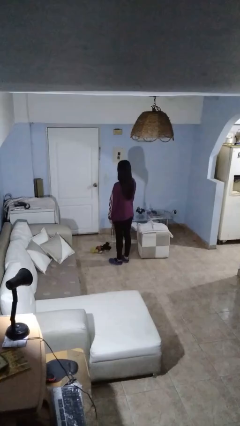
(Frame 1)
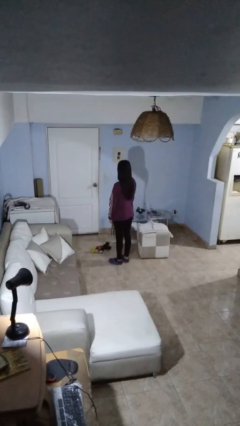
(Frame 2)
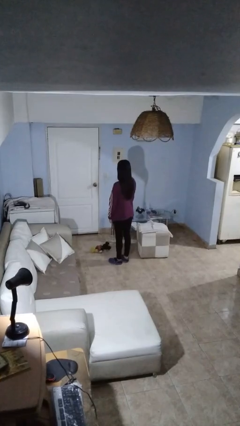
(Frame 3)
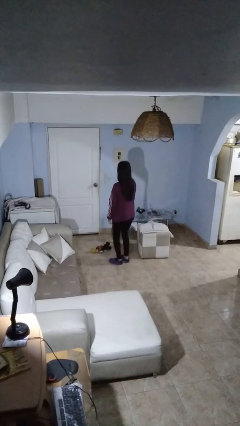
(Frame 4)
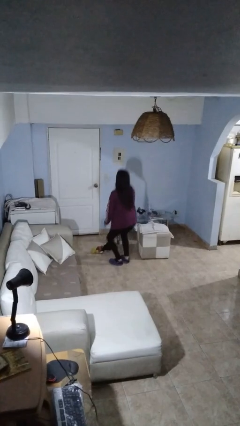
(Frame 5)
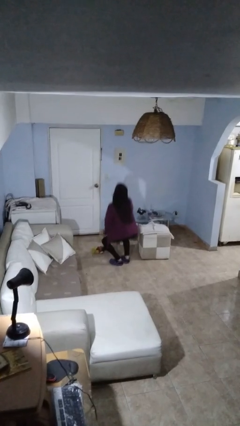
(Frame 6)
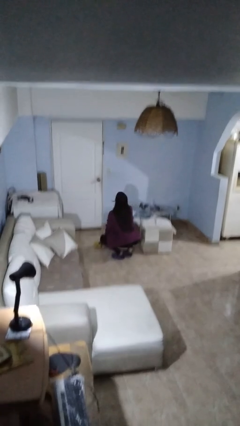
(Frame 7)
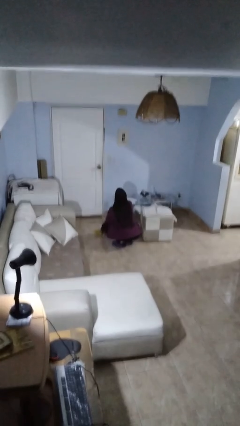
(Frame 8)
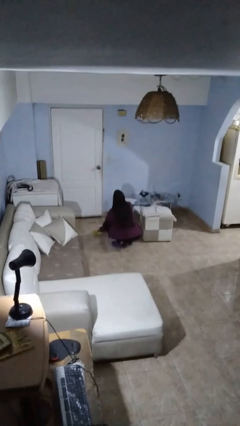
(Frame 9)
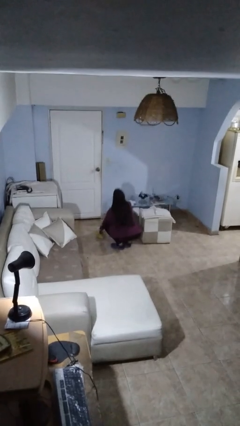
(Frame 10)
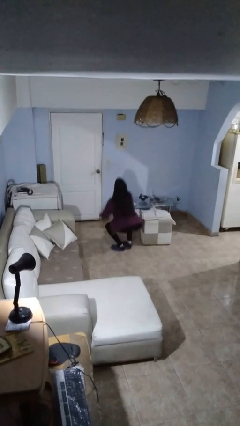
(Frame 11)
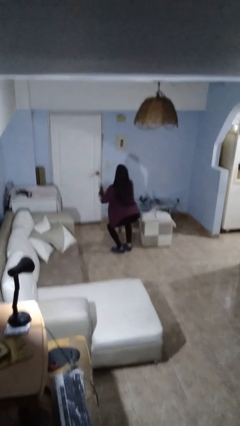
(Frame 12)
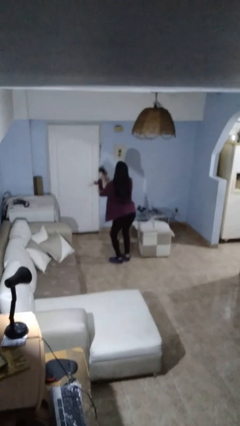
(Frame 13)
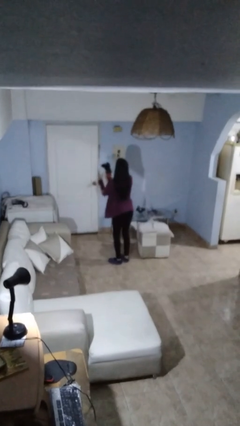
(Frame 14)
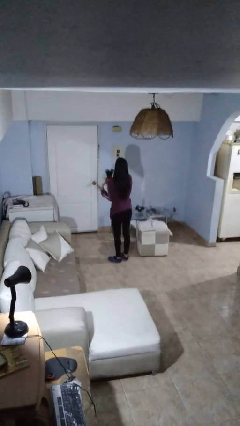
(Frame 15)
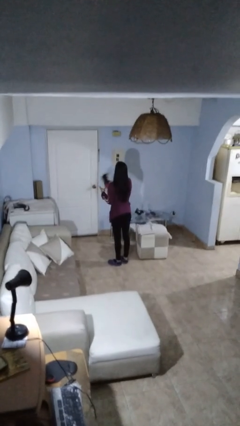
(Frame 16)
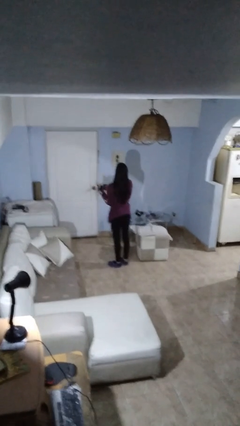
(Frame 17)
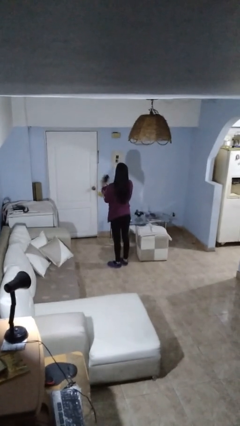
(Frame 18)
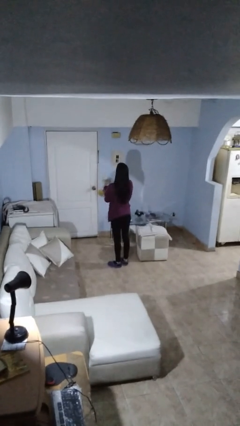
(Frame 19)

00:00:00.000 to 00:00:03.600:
person picks up object from floor

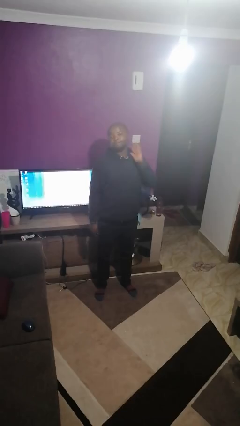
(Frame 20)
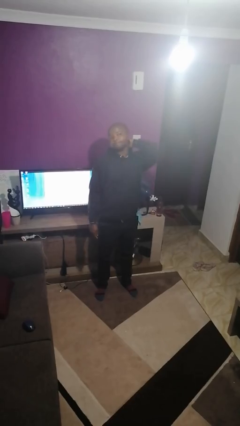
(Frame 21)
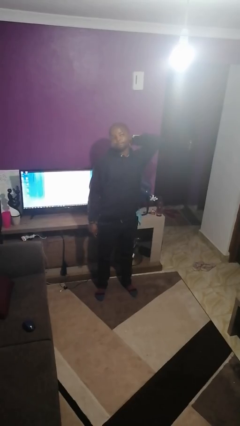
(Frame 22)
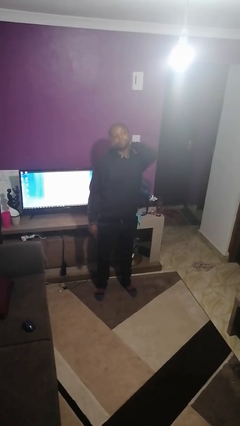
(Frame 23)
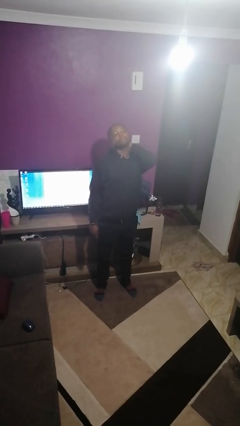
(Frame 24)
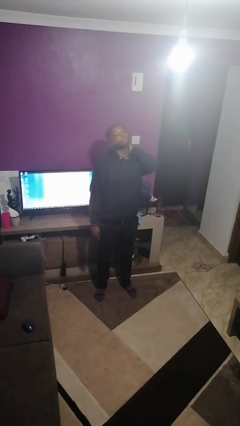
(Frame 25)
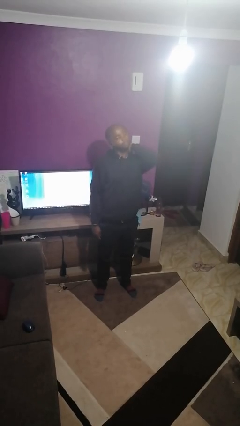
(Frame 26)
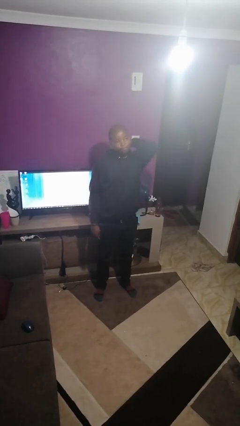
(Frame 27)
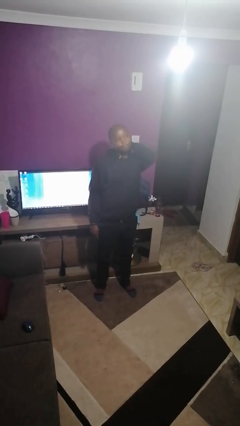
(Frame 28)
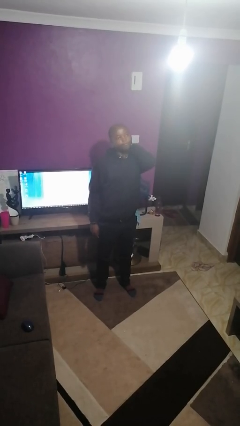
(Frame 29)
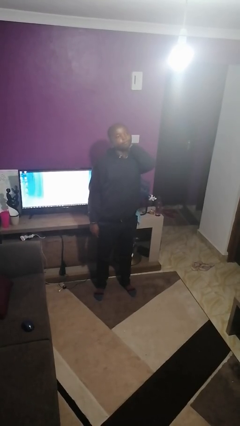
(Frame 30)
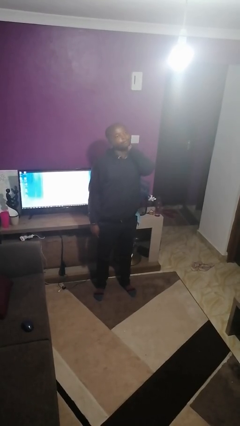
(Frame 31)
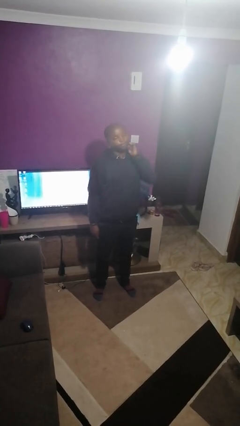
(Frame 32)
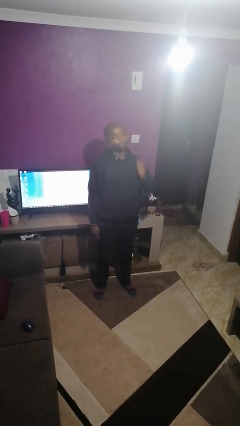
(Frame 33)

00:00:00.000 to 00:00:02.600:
person rubs neck

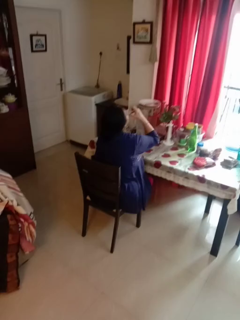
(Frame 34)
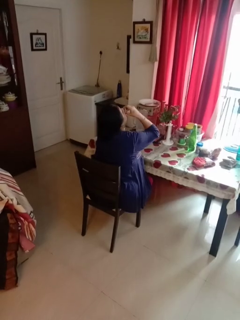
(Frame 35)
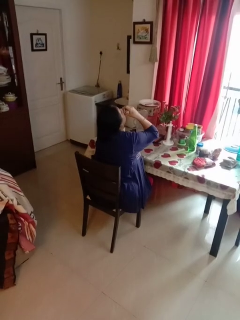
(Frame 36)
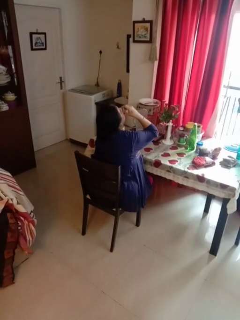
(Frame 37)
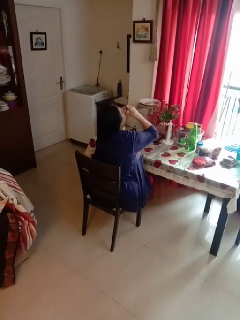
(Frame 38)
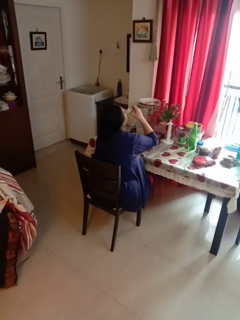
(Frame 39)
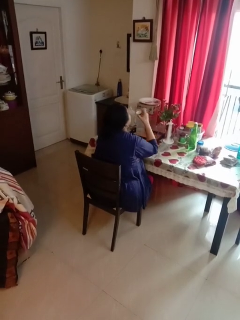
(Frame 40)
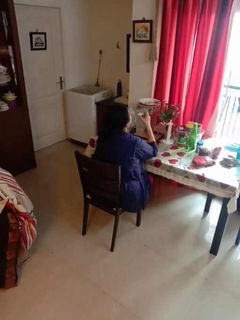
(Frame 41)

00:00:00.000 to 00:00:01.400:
person drinks from shotglass

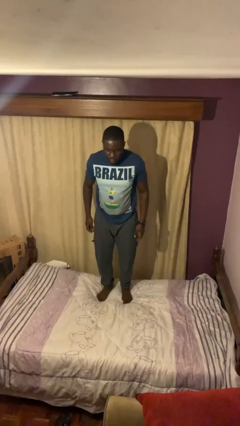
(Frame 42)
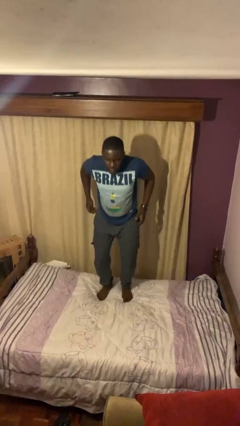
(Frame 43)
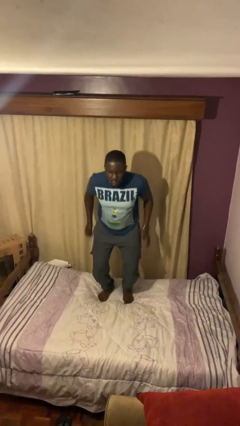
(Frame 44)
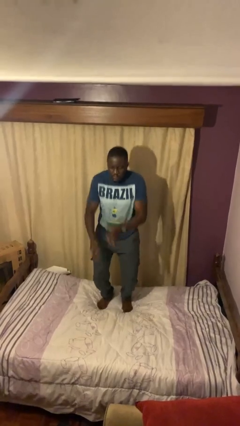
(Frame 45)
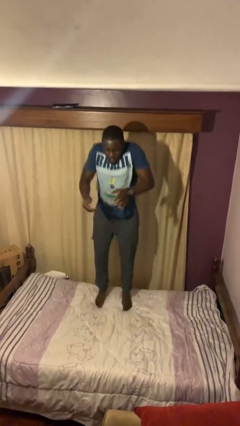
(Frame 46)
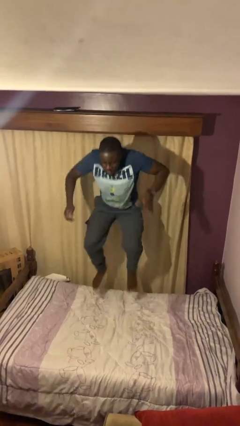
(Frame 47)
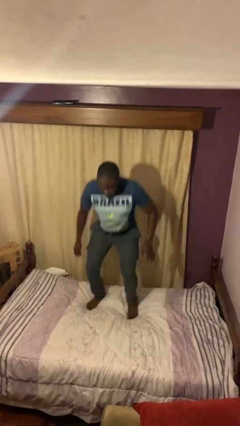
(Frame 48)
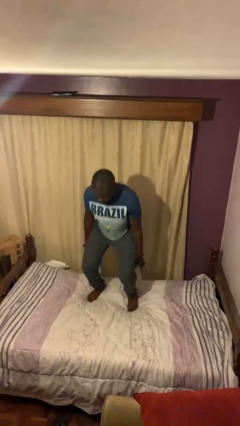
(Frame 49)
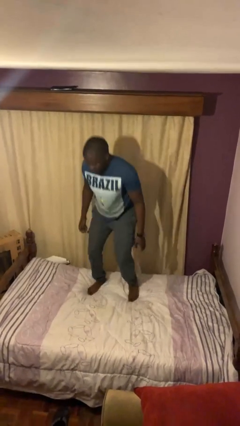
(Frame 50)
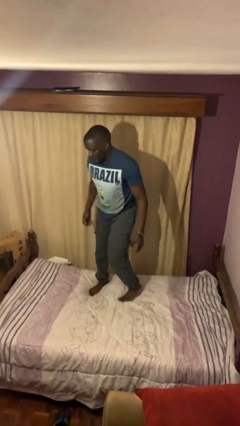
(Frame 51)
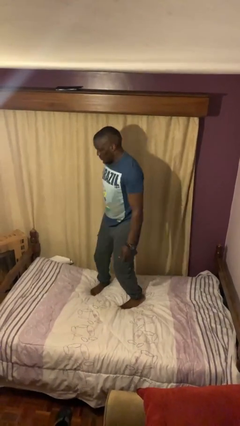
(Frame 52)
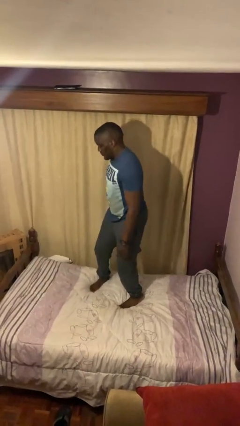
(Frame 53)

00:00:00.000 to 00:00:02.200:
person jumps on bed

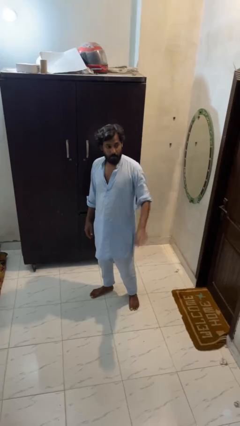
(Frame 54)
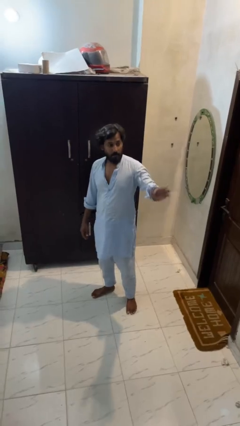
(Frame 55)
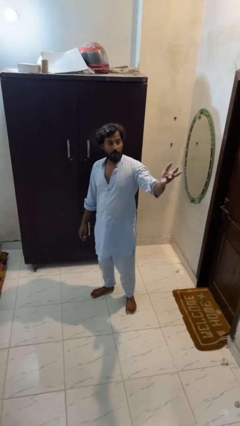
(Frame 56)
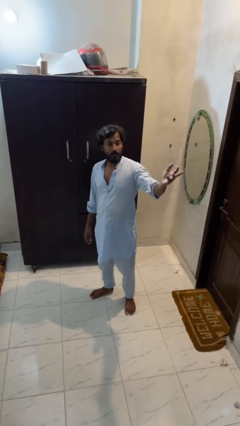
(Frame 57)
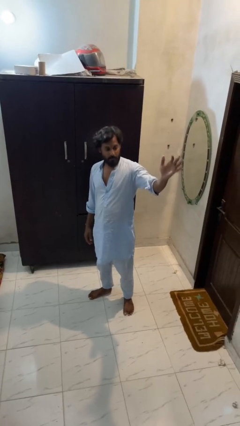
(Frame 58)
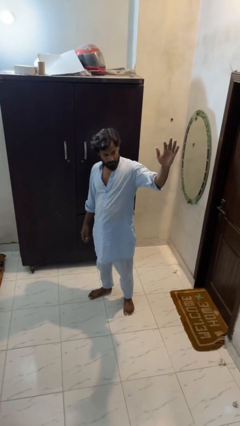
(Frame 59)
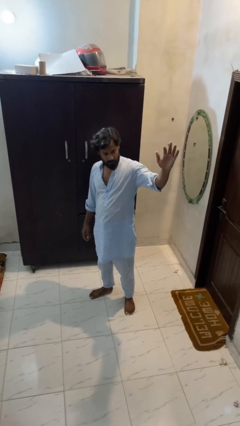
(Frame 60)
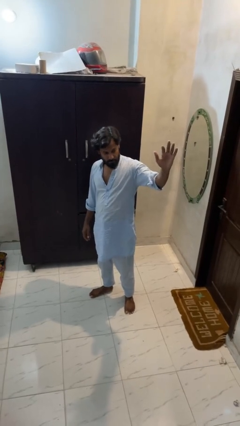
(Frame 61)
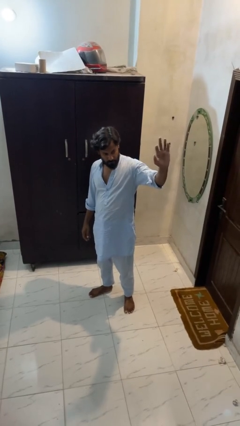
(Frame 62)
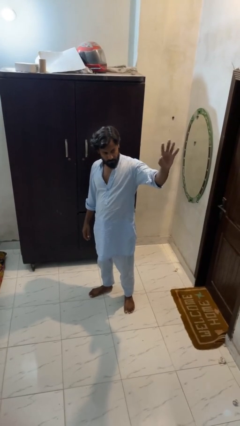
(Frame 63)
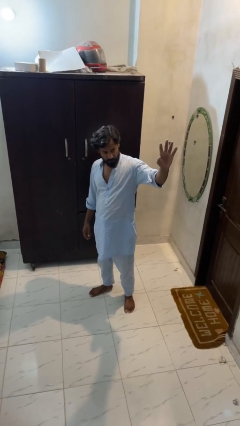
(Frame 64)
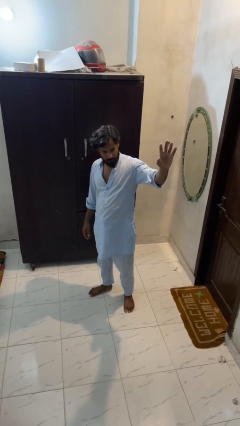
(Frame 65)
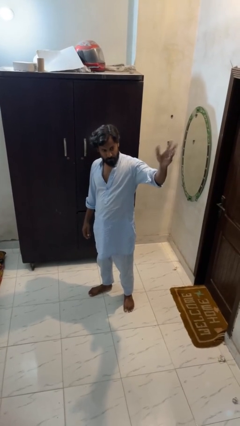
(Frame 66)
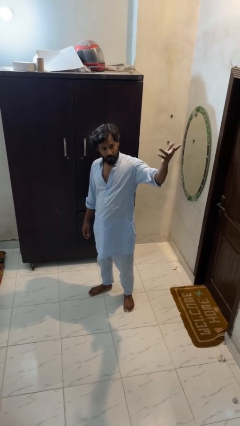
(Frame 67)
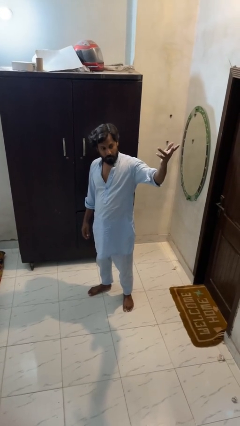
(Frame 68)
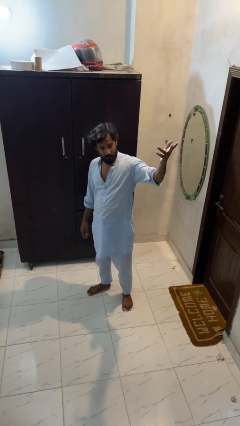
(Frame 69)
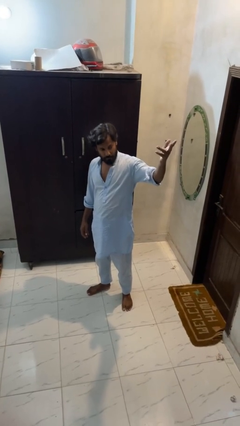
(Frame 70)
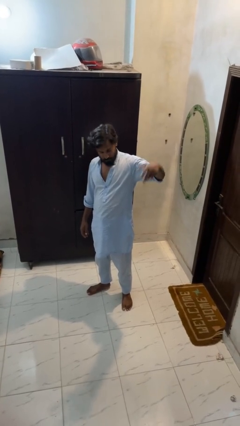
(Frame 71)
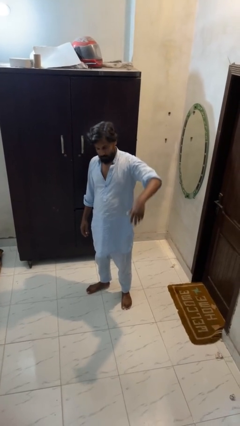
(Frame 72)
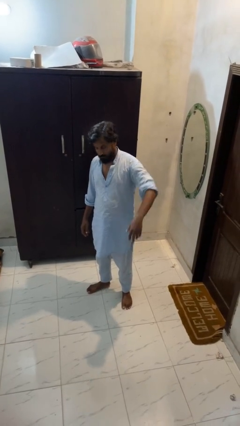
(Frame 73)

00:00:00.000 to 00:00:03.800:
person gestures raise hand

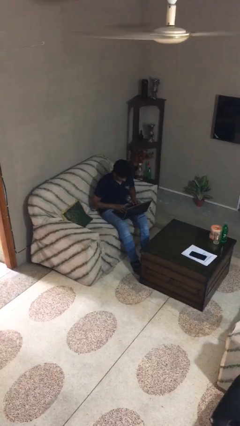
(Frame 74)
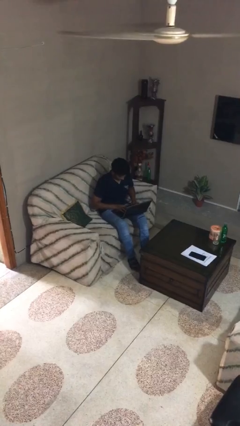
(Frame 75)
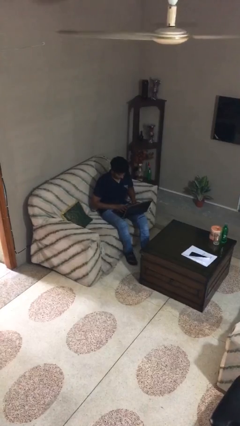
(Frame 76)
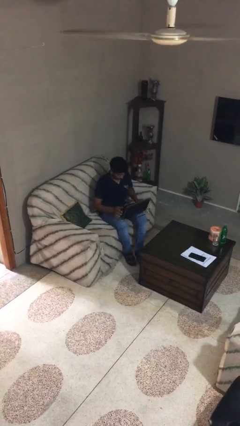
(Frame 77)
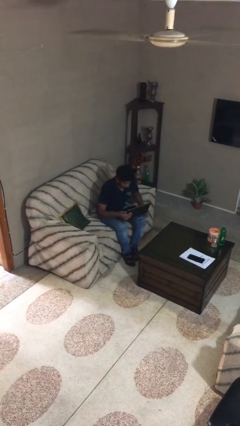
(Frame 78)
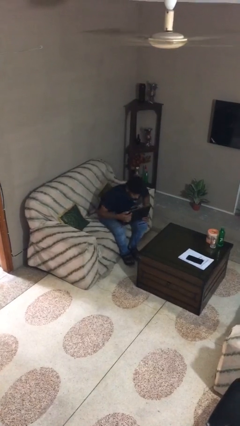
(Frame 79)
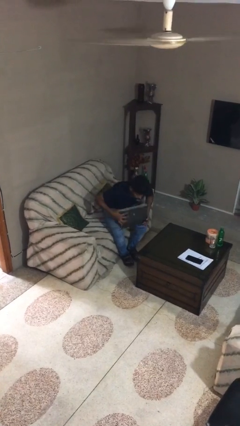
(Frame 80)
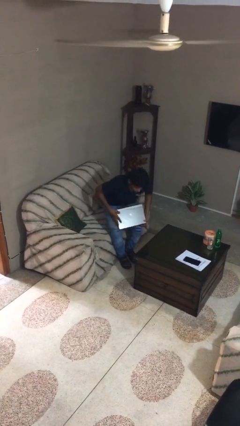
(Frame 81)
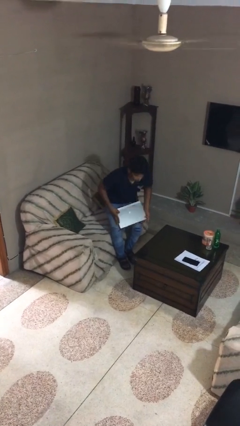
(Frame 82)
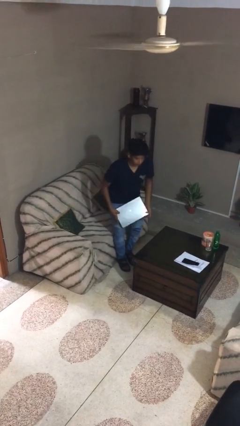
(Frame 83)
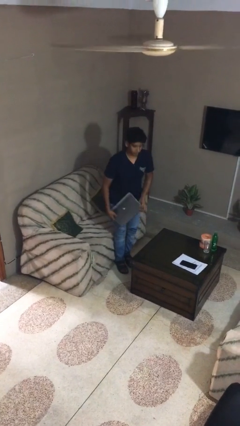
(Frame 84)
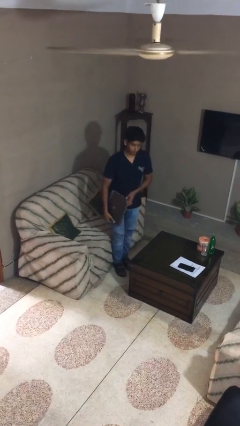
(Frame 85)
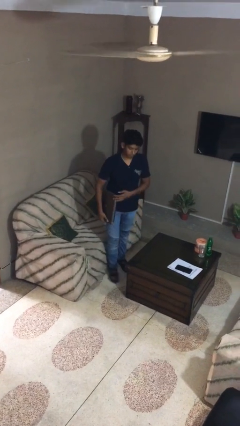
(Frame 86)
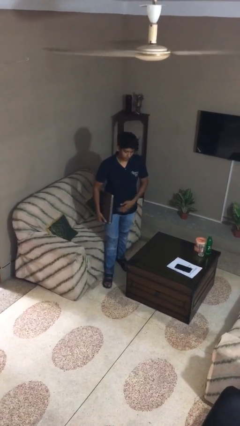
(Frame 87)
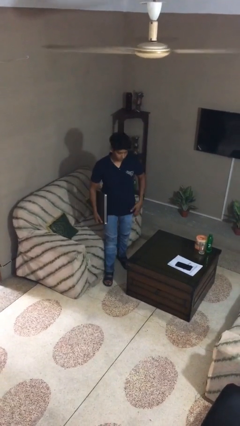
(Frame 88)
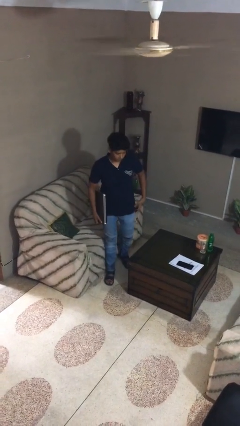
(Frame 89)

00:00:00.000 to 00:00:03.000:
person stands up

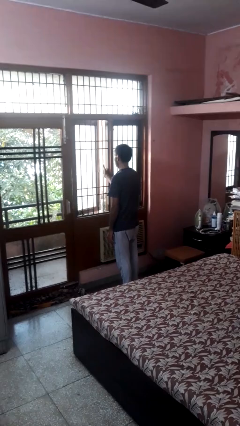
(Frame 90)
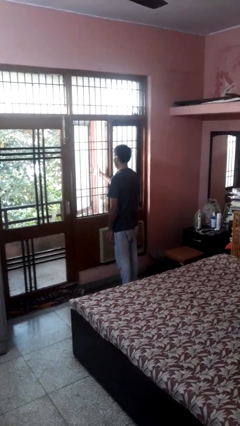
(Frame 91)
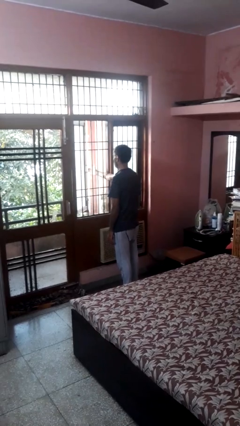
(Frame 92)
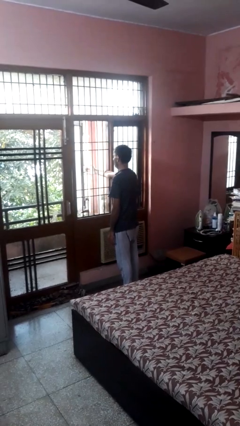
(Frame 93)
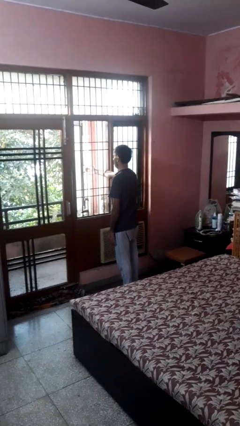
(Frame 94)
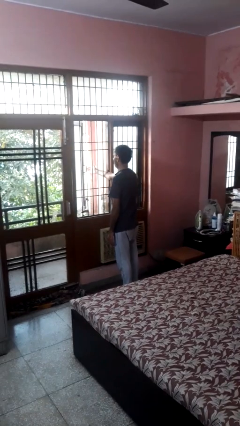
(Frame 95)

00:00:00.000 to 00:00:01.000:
person opens home window
